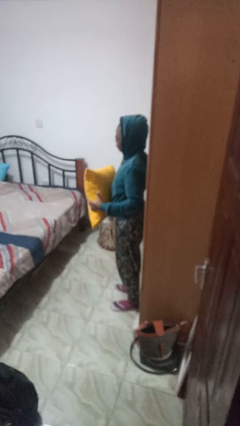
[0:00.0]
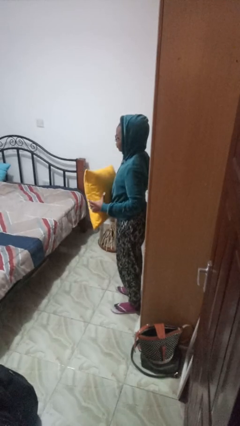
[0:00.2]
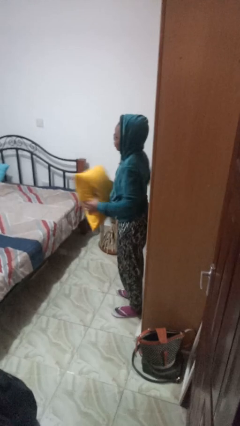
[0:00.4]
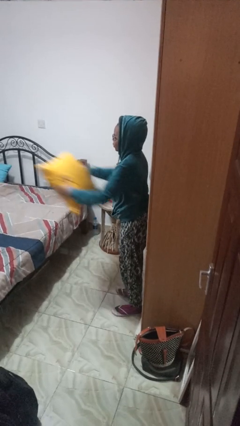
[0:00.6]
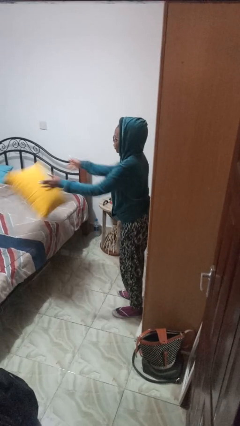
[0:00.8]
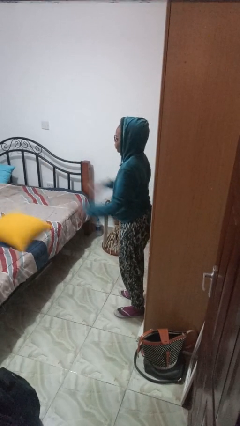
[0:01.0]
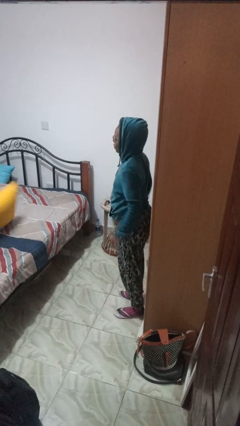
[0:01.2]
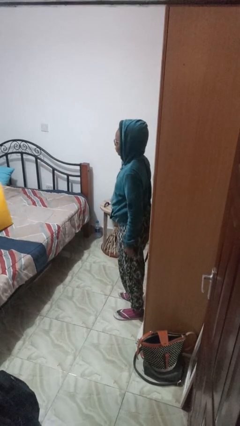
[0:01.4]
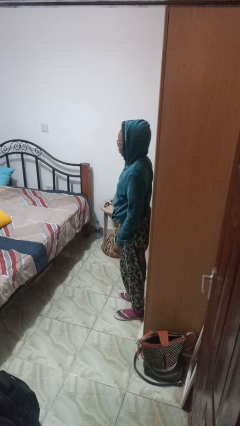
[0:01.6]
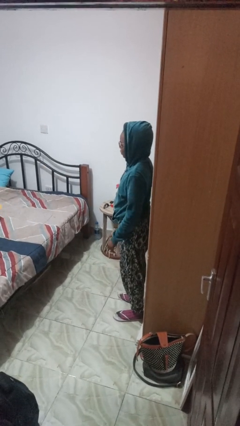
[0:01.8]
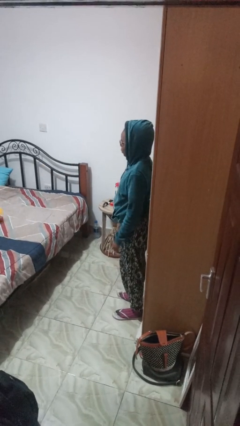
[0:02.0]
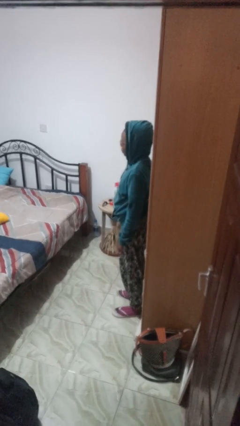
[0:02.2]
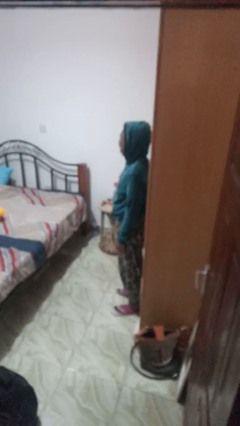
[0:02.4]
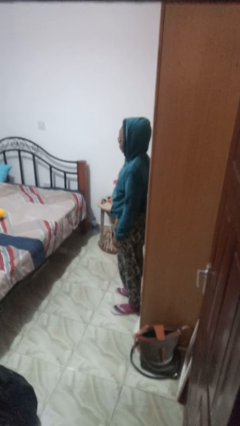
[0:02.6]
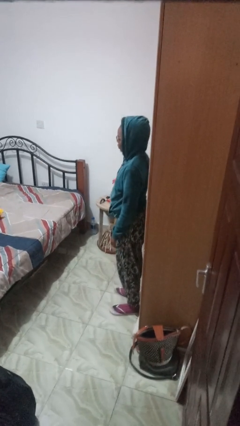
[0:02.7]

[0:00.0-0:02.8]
person throws object on bed

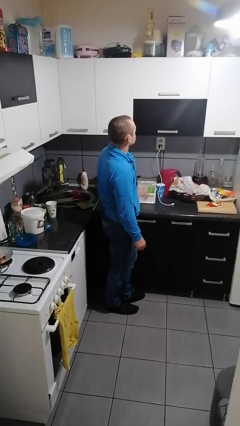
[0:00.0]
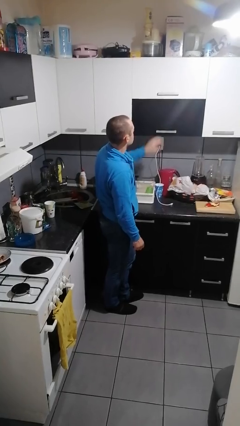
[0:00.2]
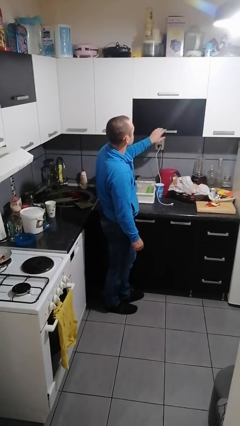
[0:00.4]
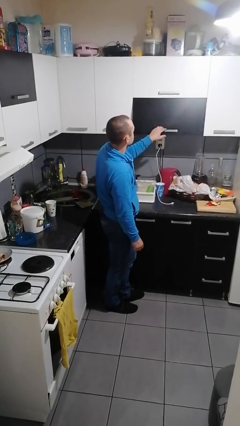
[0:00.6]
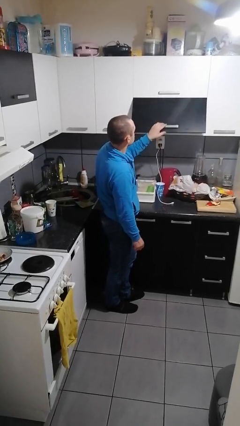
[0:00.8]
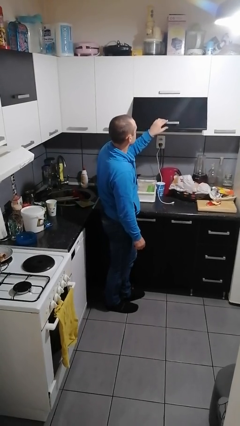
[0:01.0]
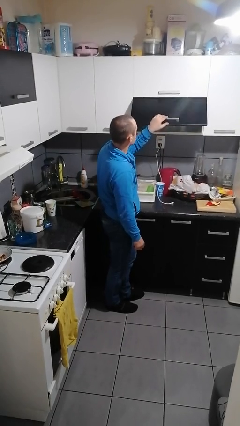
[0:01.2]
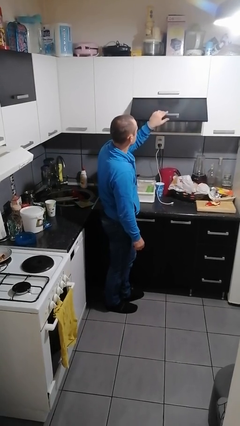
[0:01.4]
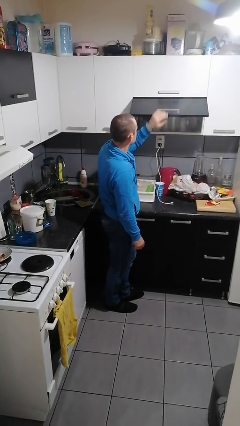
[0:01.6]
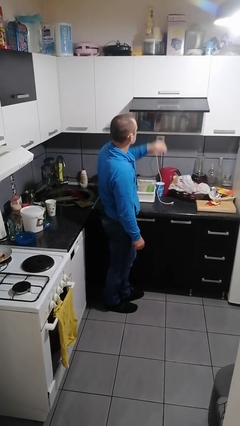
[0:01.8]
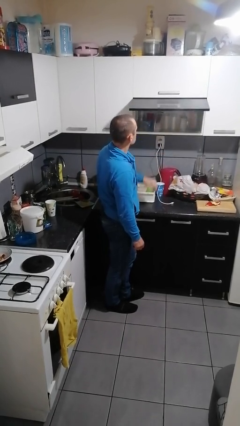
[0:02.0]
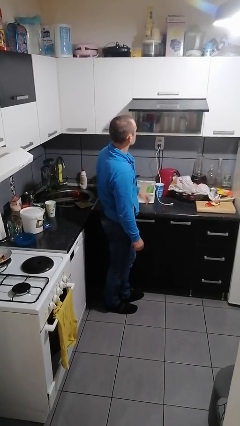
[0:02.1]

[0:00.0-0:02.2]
person opens cabinet

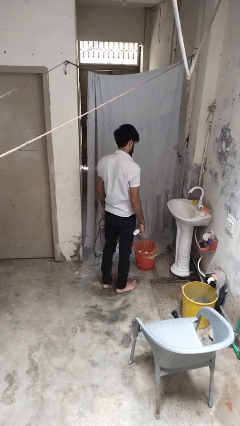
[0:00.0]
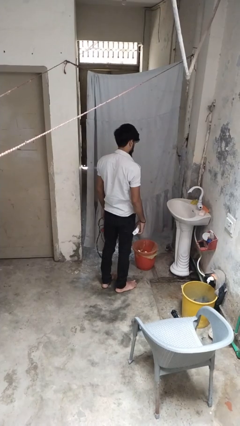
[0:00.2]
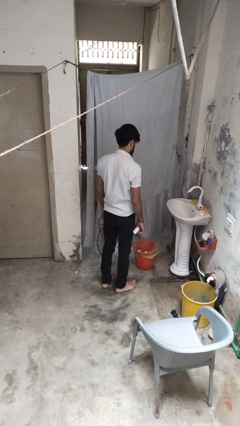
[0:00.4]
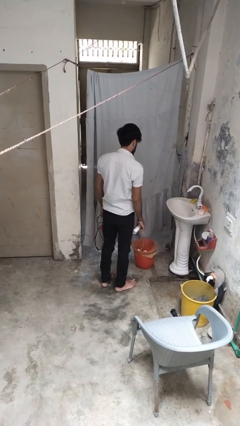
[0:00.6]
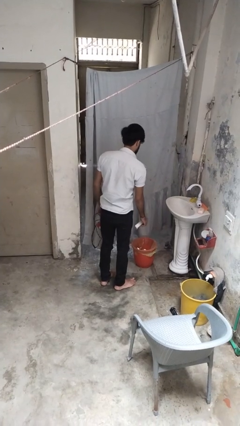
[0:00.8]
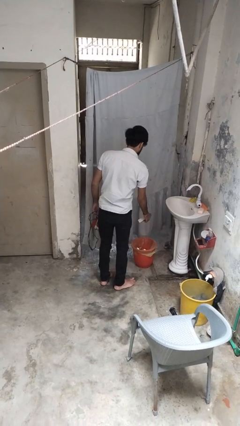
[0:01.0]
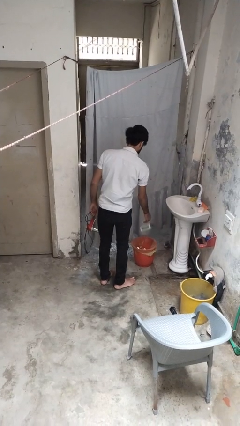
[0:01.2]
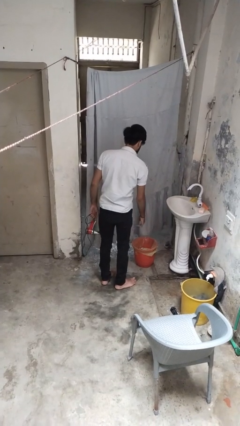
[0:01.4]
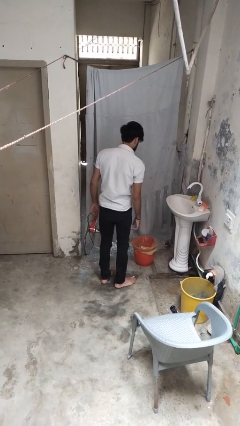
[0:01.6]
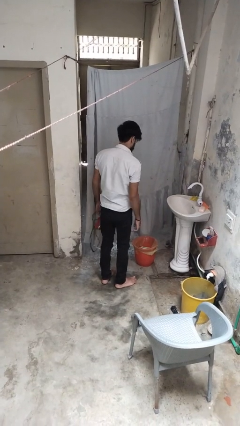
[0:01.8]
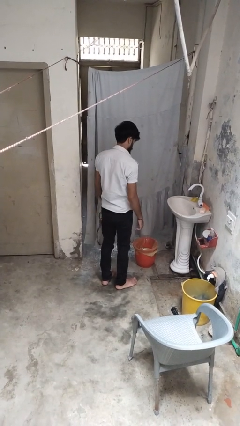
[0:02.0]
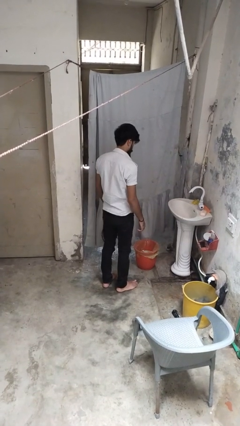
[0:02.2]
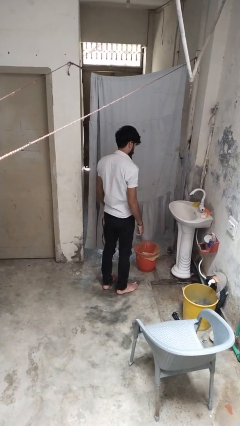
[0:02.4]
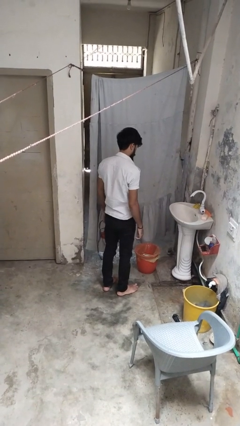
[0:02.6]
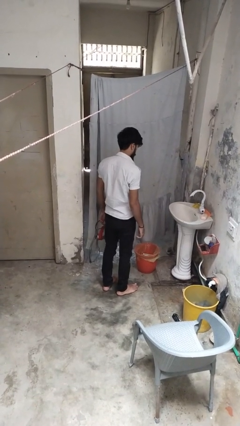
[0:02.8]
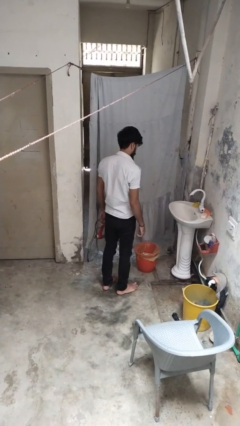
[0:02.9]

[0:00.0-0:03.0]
person discards trash

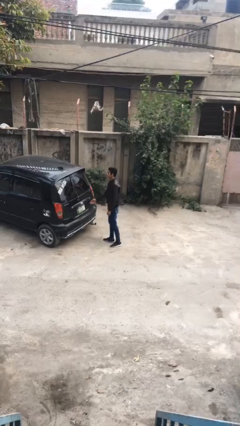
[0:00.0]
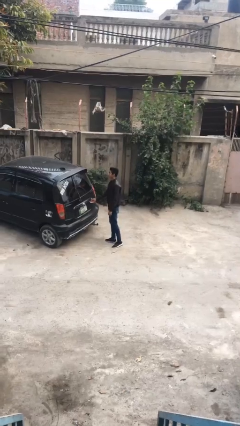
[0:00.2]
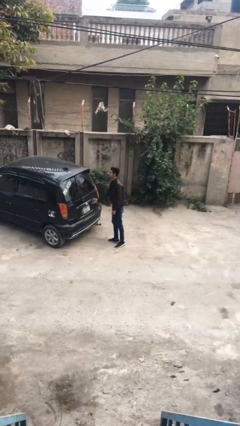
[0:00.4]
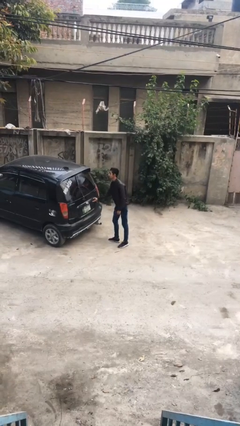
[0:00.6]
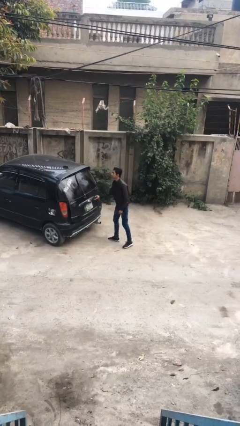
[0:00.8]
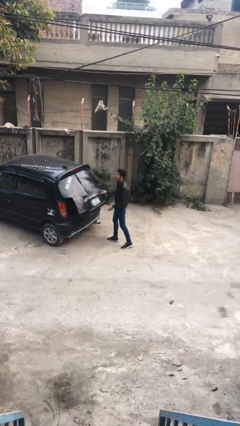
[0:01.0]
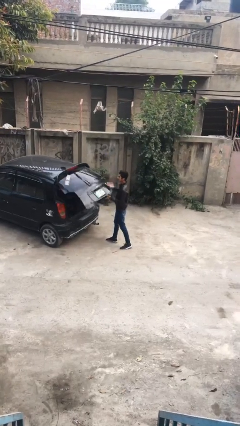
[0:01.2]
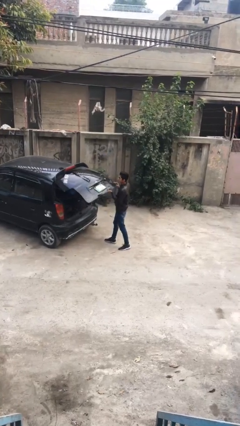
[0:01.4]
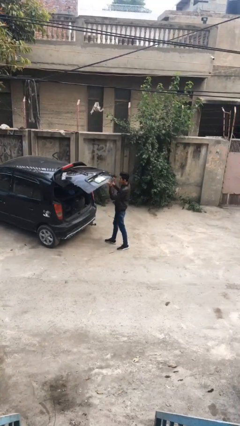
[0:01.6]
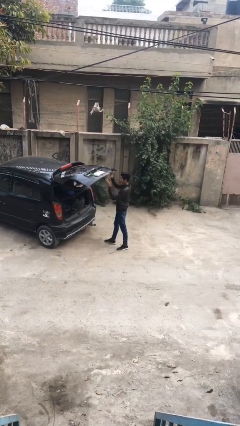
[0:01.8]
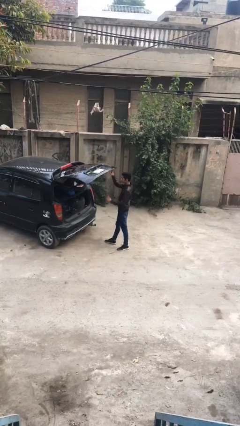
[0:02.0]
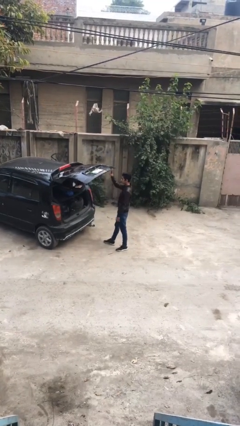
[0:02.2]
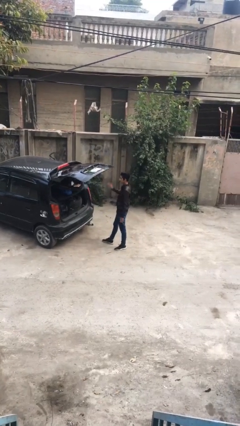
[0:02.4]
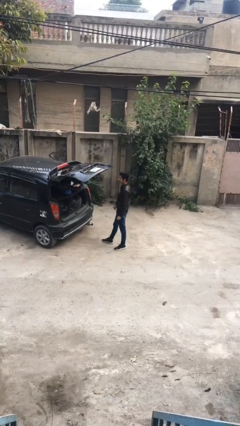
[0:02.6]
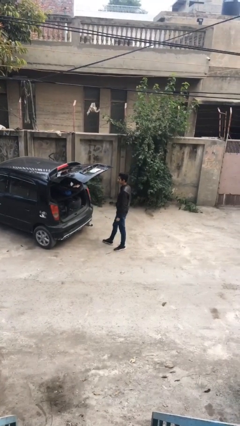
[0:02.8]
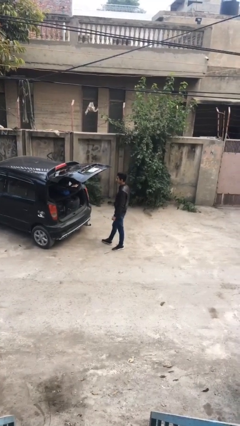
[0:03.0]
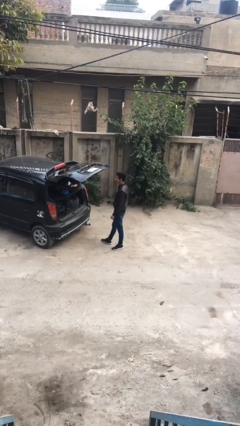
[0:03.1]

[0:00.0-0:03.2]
person opens car trunk

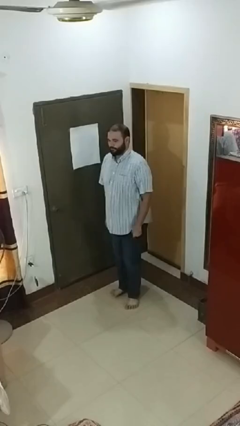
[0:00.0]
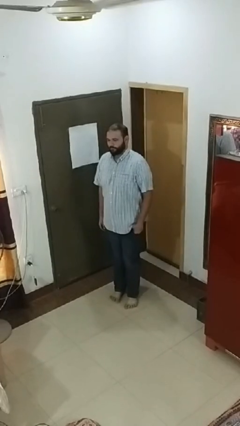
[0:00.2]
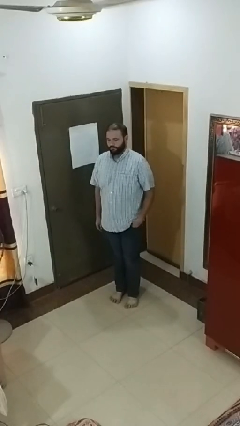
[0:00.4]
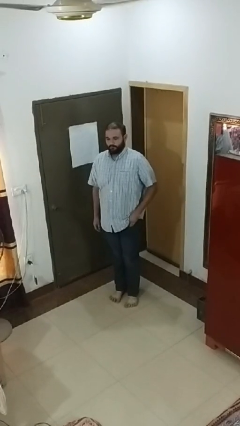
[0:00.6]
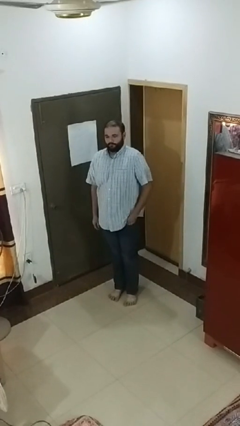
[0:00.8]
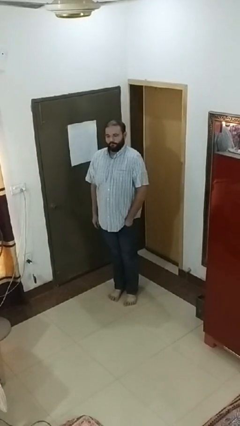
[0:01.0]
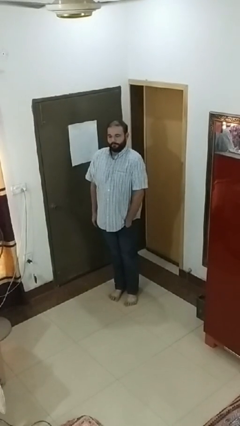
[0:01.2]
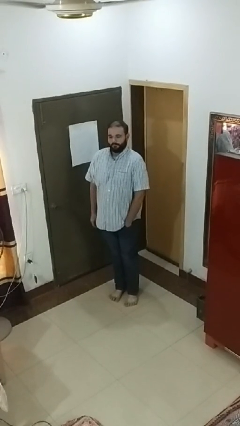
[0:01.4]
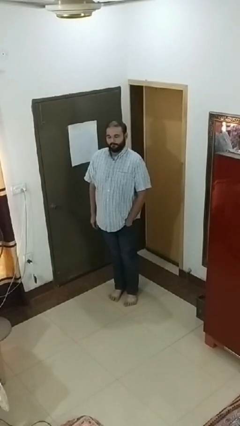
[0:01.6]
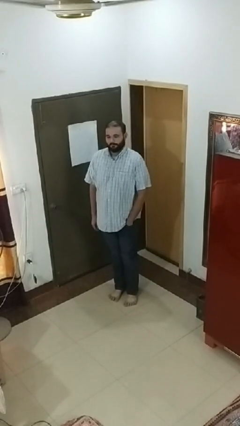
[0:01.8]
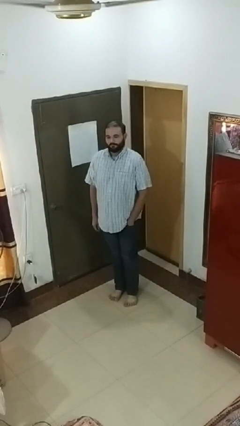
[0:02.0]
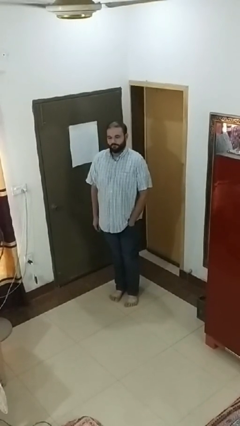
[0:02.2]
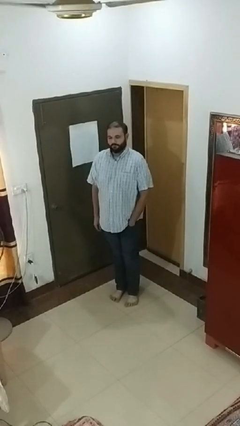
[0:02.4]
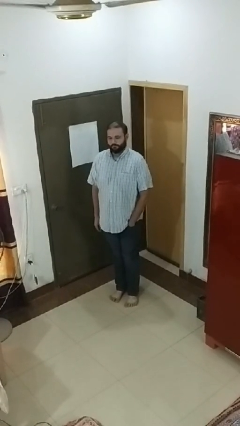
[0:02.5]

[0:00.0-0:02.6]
person puts hands in back pockets

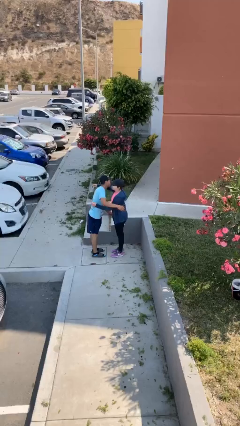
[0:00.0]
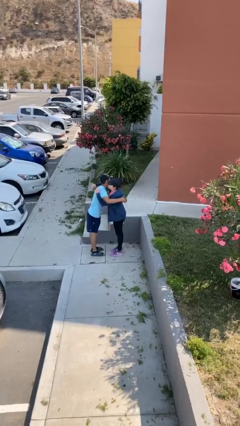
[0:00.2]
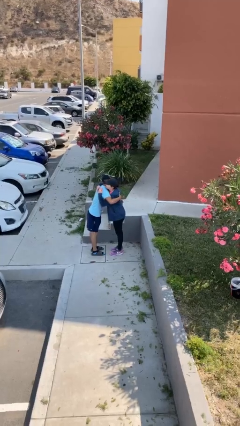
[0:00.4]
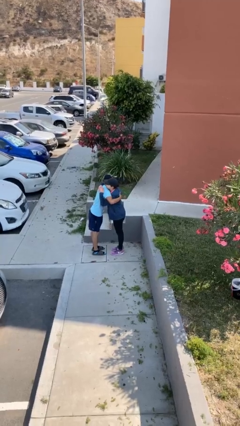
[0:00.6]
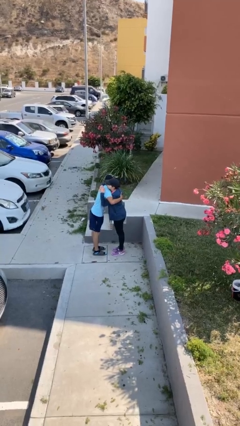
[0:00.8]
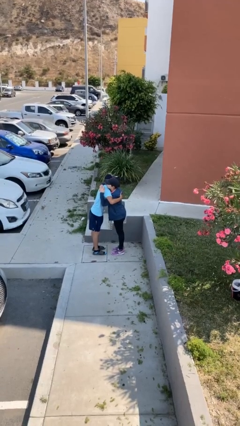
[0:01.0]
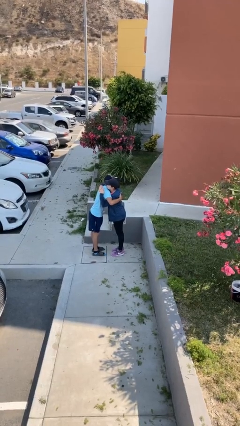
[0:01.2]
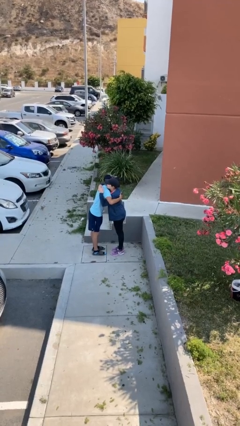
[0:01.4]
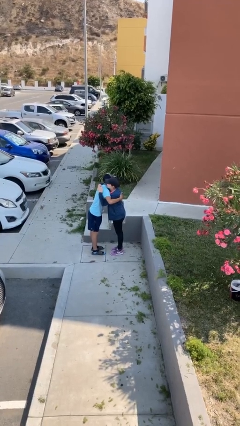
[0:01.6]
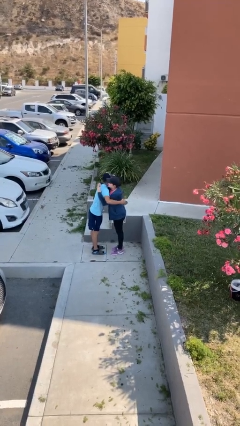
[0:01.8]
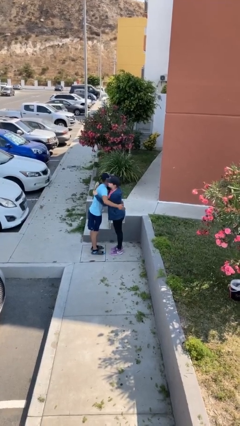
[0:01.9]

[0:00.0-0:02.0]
person embraces person

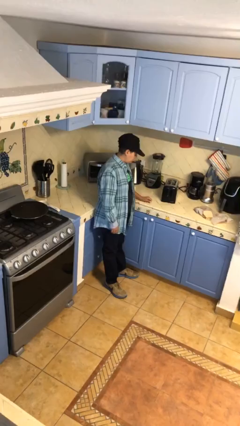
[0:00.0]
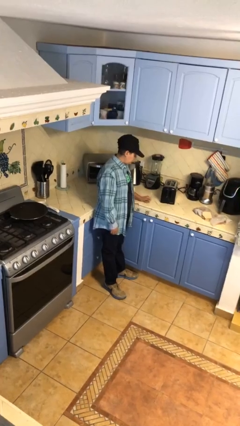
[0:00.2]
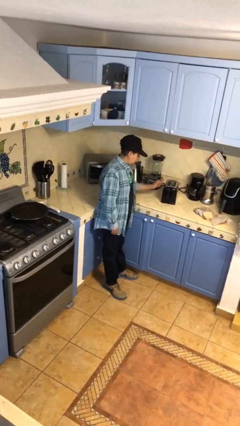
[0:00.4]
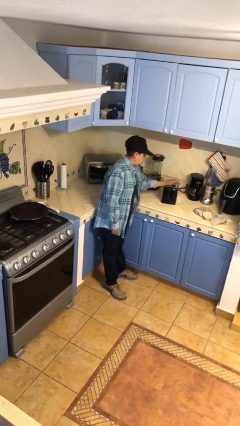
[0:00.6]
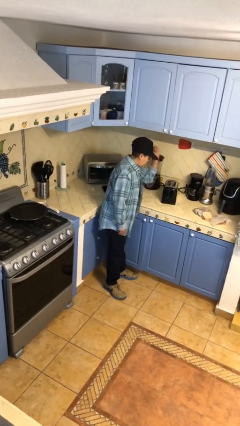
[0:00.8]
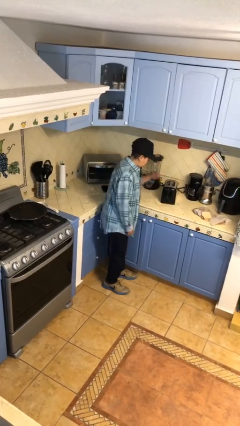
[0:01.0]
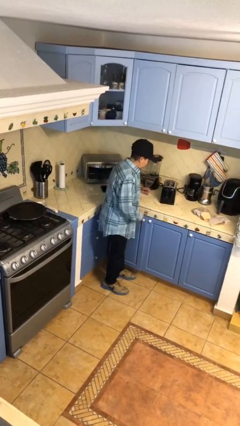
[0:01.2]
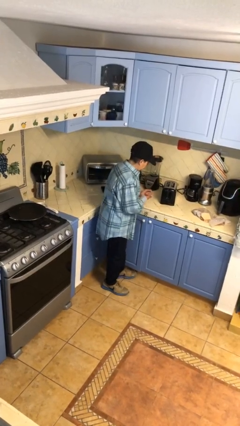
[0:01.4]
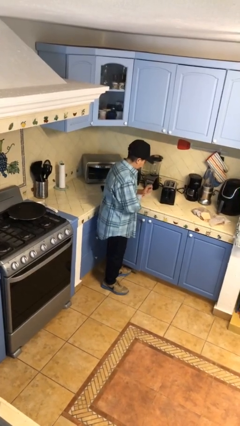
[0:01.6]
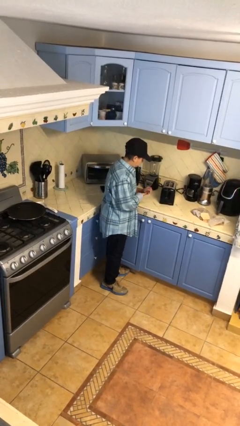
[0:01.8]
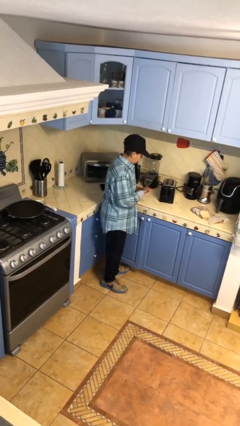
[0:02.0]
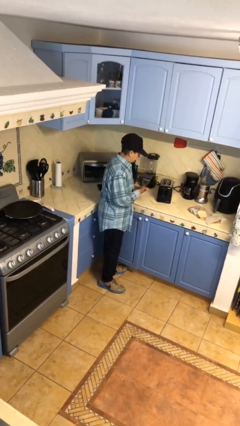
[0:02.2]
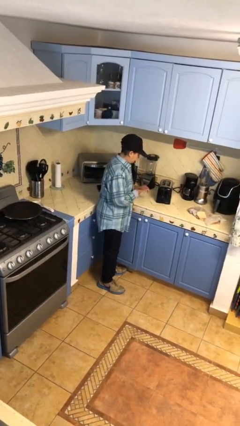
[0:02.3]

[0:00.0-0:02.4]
person burns hand
